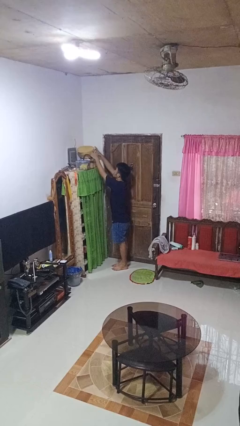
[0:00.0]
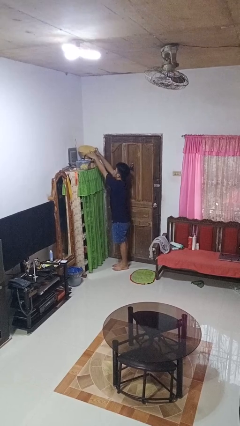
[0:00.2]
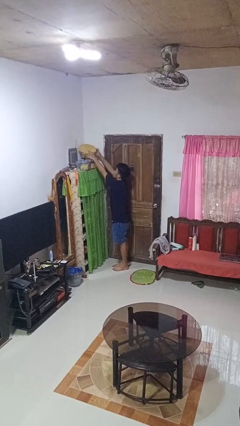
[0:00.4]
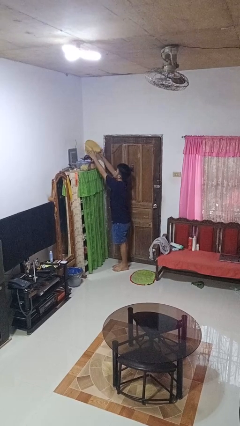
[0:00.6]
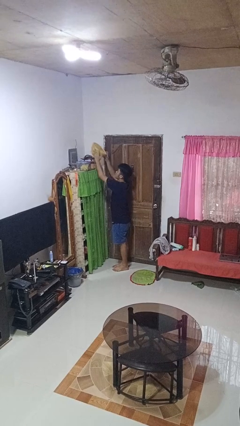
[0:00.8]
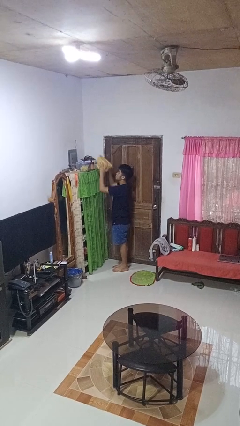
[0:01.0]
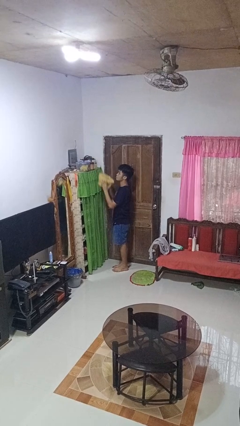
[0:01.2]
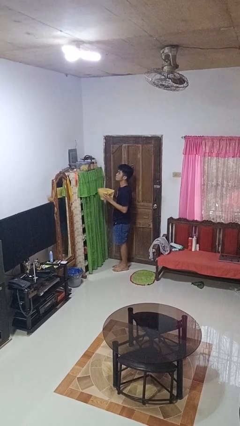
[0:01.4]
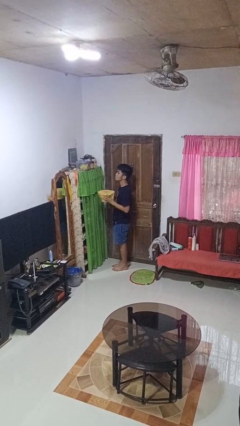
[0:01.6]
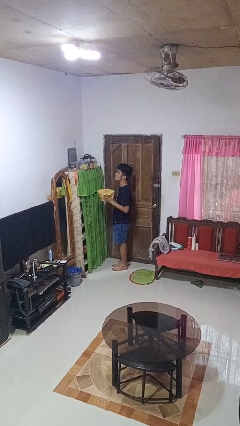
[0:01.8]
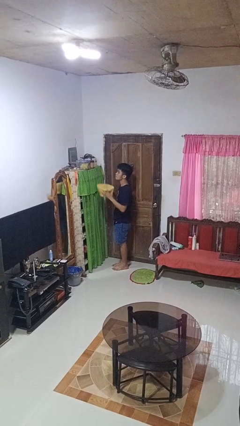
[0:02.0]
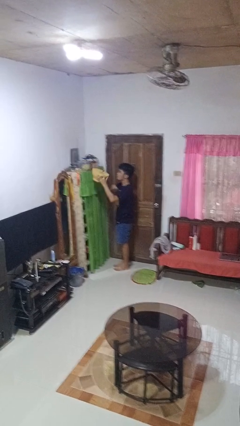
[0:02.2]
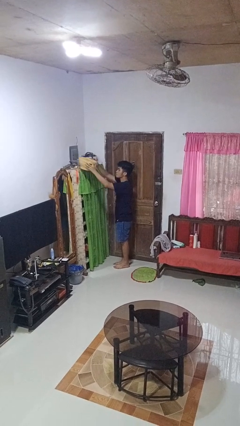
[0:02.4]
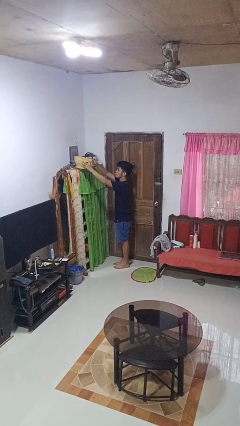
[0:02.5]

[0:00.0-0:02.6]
person picks up object from shelf

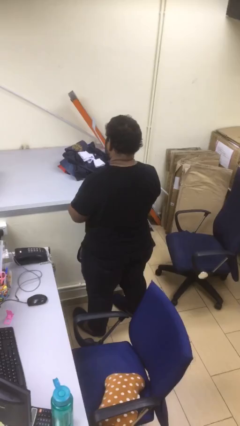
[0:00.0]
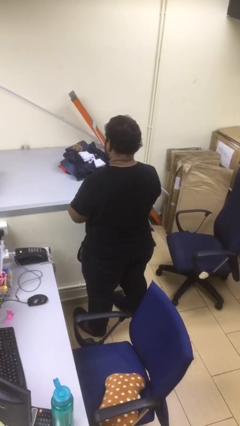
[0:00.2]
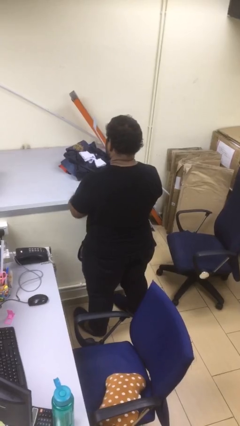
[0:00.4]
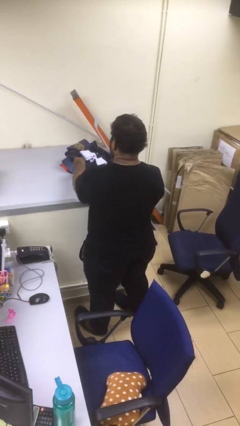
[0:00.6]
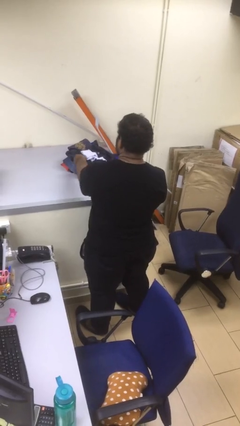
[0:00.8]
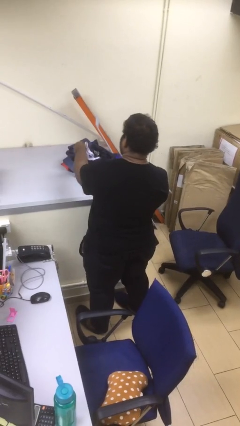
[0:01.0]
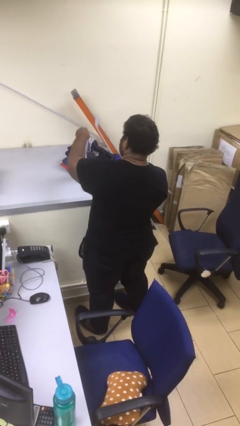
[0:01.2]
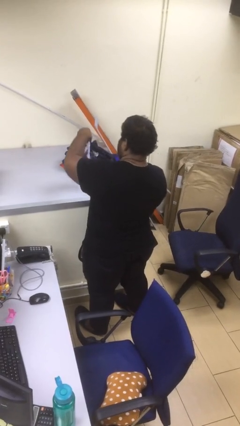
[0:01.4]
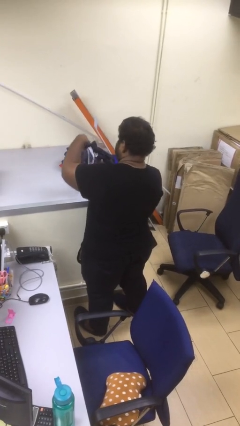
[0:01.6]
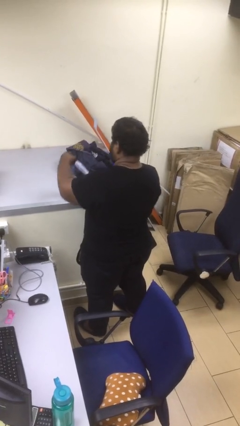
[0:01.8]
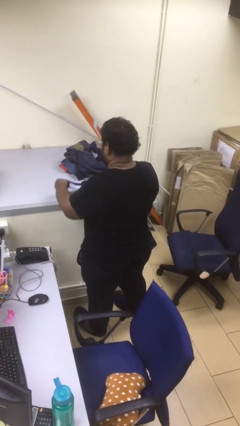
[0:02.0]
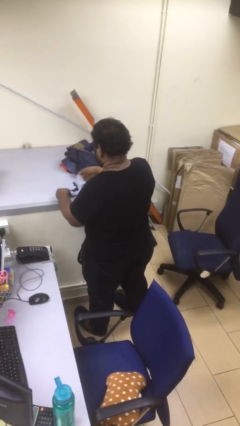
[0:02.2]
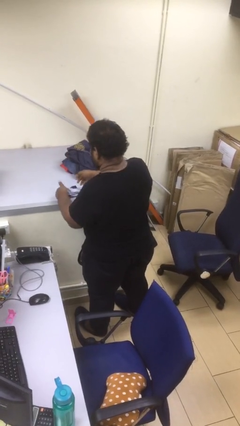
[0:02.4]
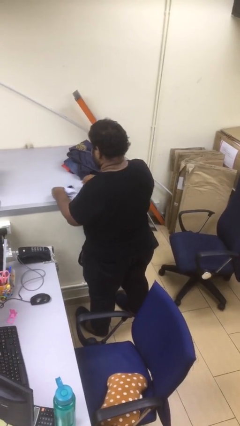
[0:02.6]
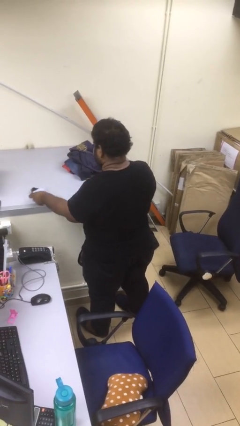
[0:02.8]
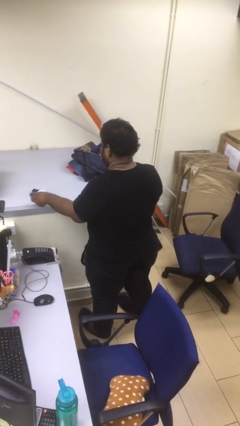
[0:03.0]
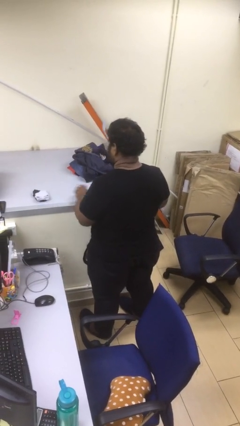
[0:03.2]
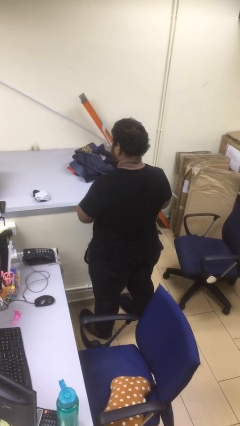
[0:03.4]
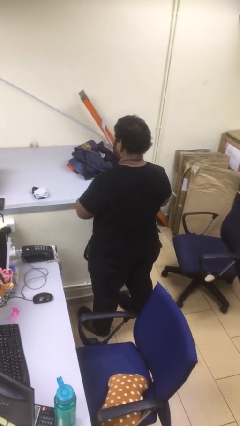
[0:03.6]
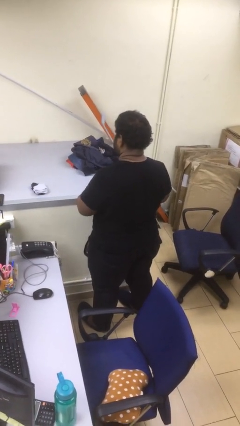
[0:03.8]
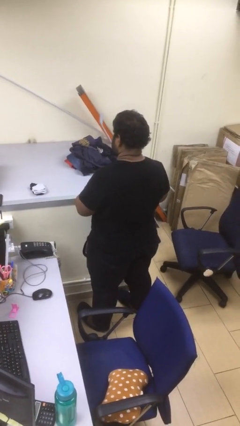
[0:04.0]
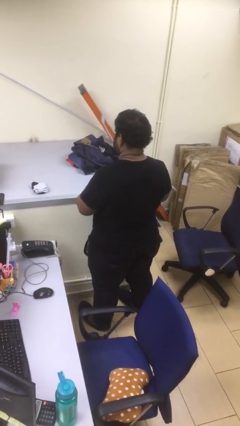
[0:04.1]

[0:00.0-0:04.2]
person folds socks

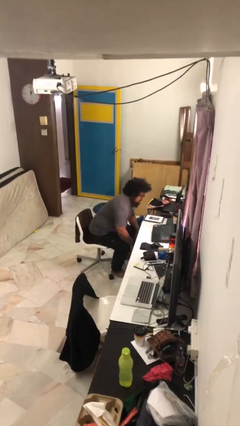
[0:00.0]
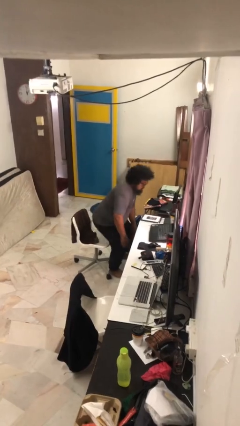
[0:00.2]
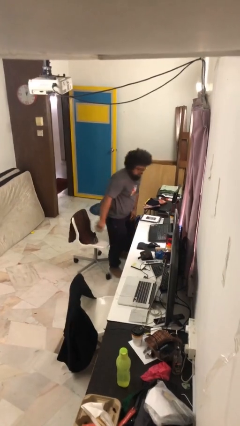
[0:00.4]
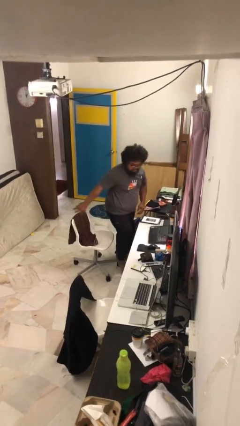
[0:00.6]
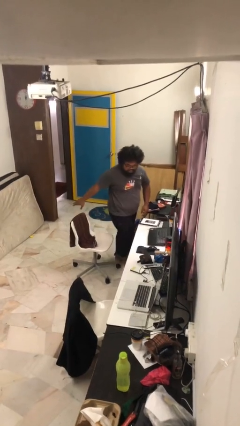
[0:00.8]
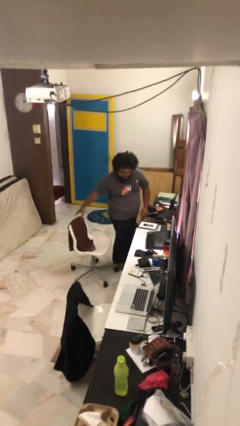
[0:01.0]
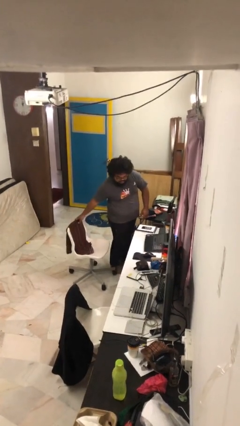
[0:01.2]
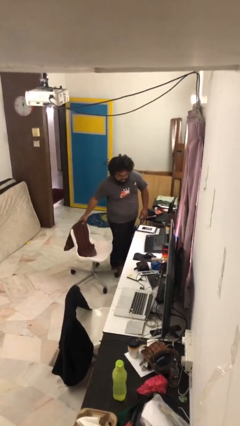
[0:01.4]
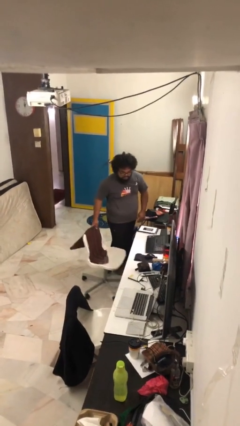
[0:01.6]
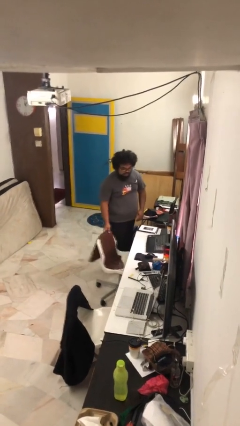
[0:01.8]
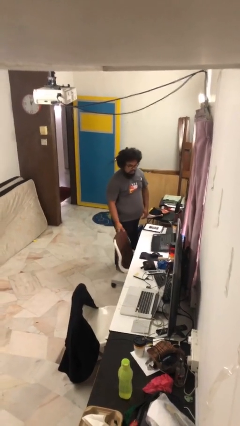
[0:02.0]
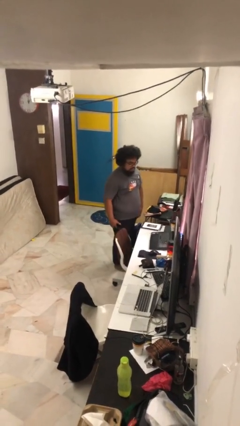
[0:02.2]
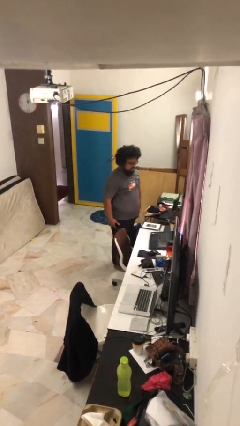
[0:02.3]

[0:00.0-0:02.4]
person stands up

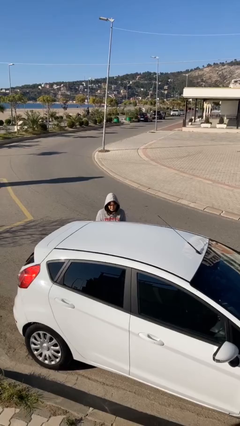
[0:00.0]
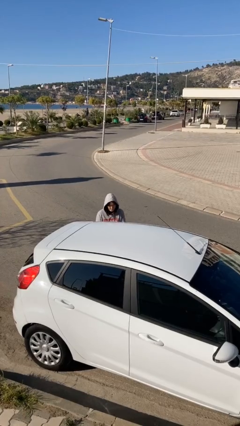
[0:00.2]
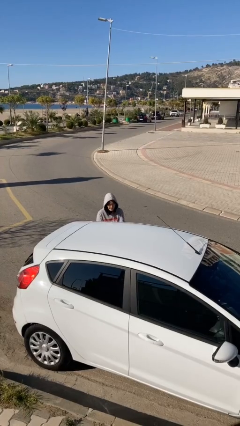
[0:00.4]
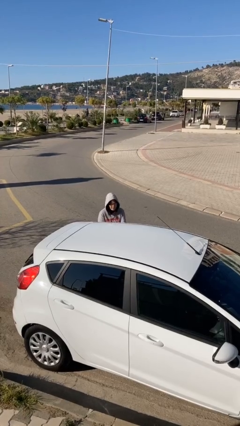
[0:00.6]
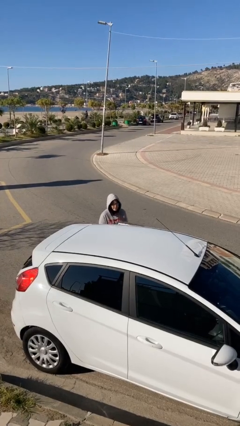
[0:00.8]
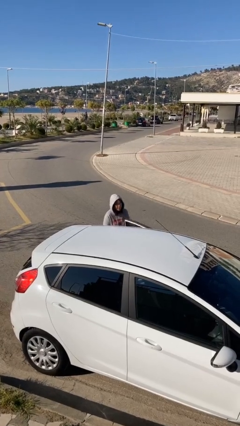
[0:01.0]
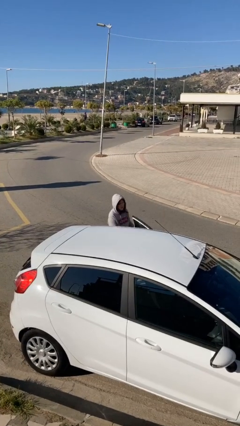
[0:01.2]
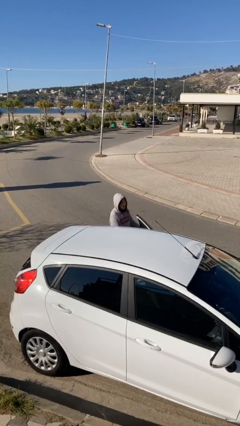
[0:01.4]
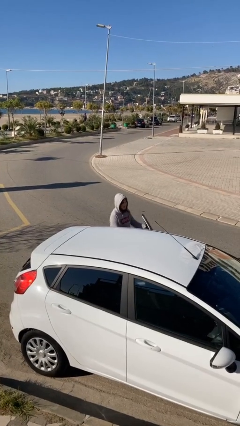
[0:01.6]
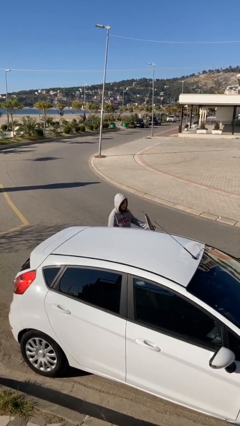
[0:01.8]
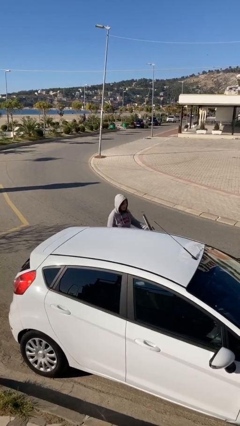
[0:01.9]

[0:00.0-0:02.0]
person opens car door

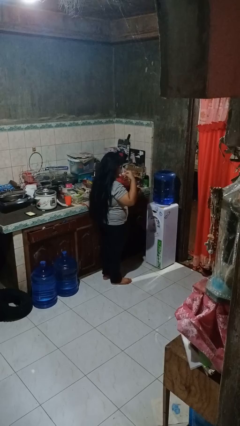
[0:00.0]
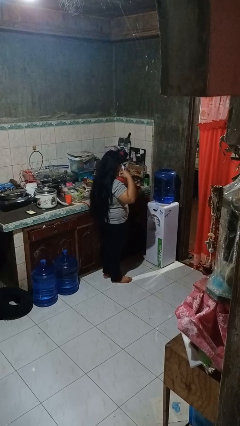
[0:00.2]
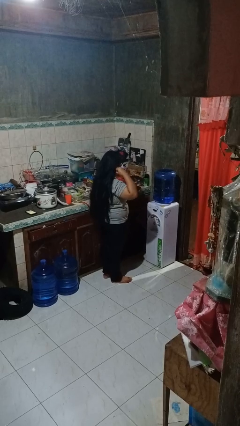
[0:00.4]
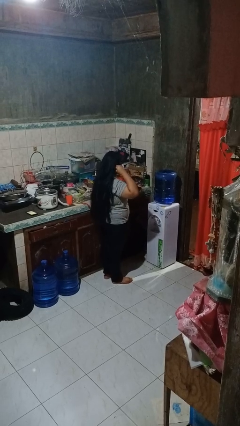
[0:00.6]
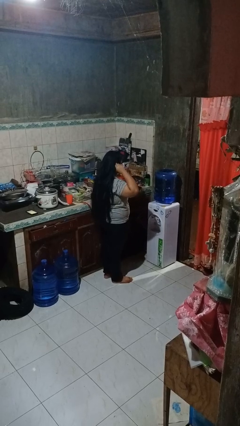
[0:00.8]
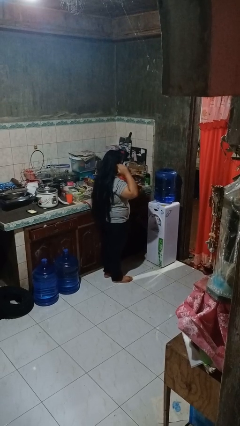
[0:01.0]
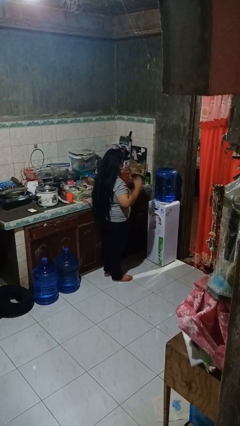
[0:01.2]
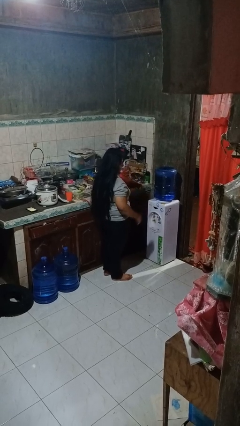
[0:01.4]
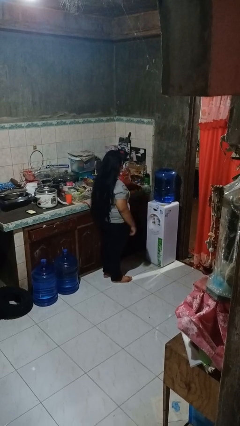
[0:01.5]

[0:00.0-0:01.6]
person puts on facemask

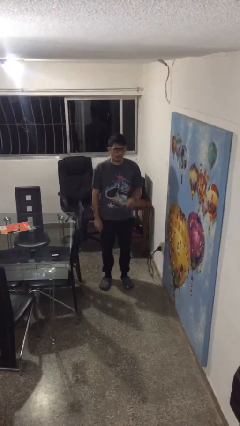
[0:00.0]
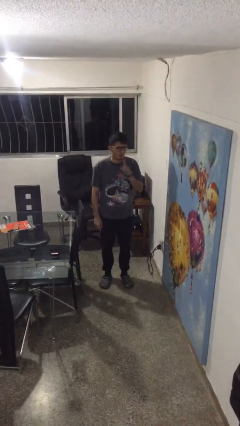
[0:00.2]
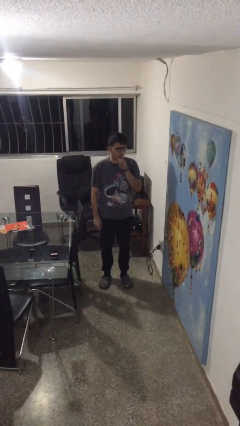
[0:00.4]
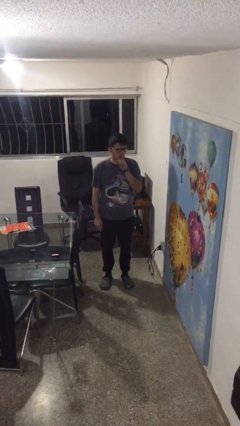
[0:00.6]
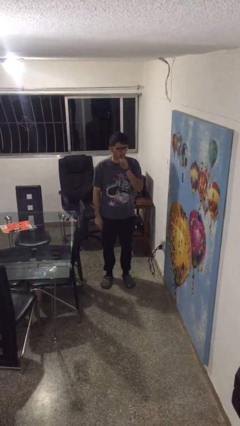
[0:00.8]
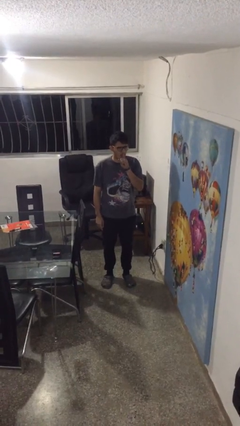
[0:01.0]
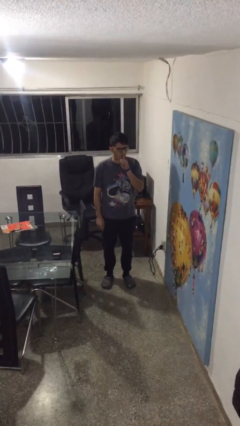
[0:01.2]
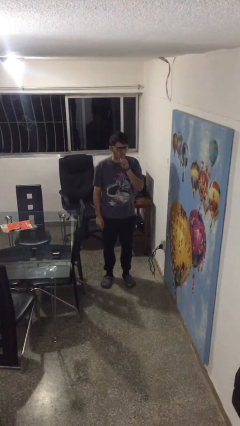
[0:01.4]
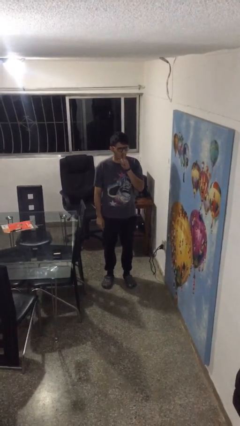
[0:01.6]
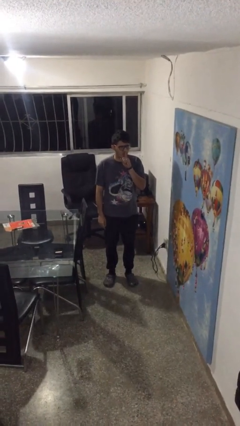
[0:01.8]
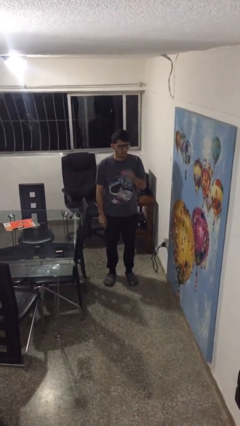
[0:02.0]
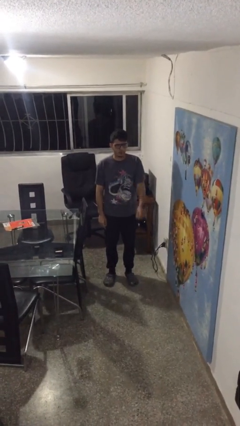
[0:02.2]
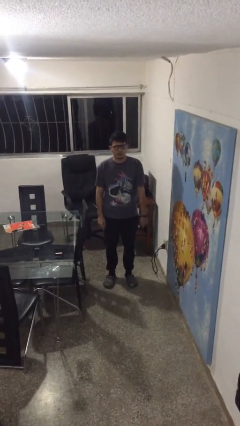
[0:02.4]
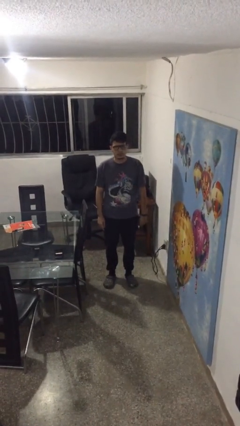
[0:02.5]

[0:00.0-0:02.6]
person gestures be quiet

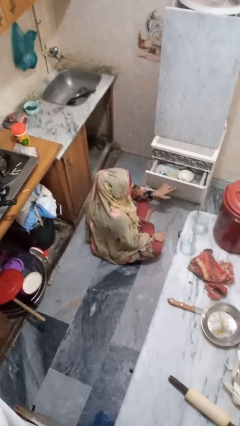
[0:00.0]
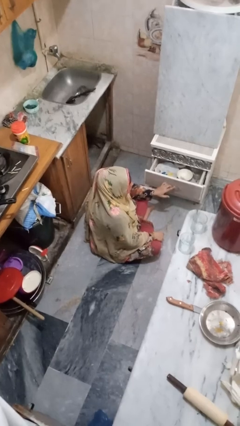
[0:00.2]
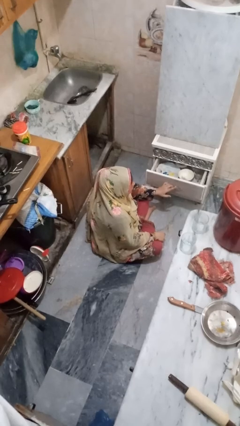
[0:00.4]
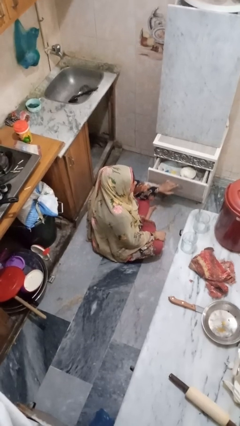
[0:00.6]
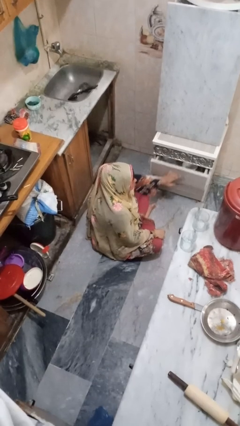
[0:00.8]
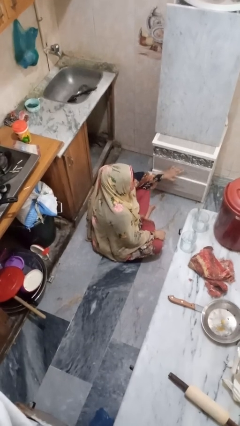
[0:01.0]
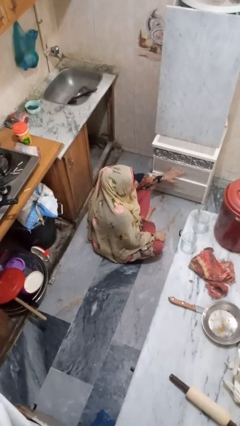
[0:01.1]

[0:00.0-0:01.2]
person closes kitchen drawer

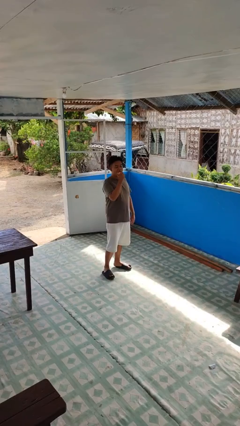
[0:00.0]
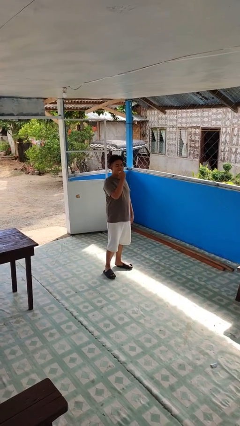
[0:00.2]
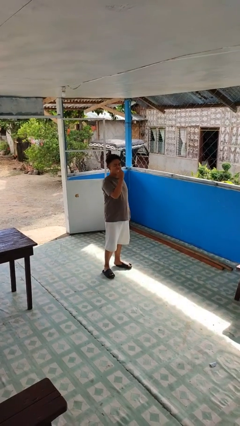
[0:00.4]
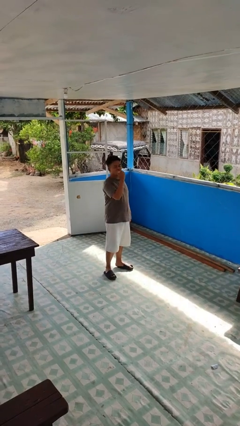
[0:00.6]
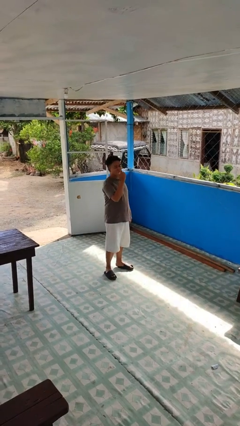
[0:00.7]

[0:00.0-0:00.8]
person eats apple
